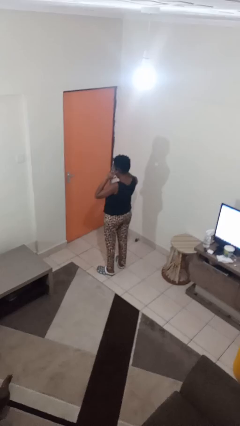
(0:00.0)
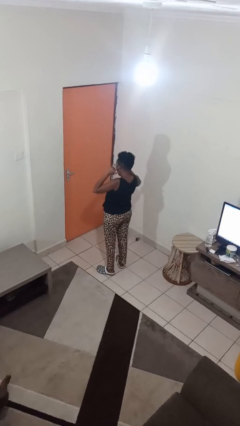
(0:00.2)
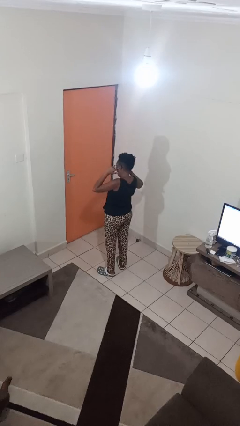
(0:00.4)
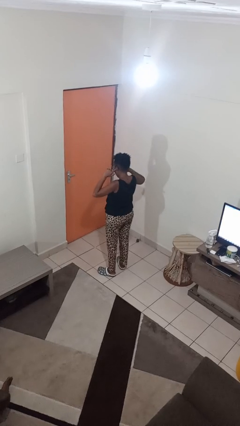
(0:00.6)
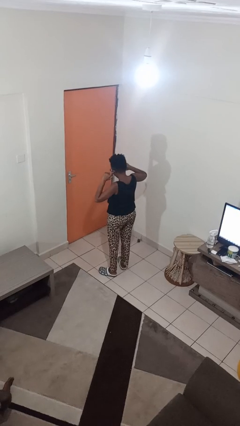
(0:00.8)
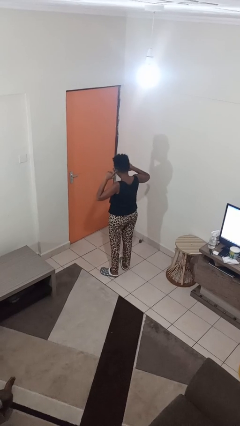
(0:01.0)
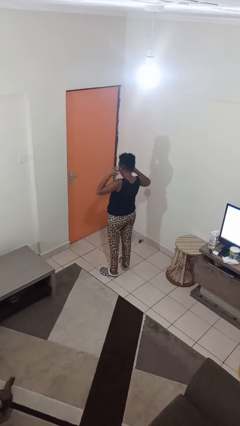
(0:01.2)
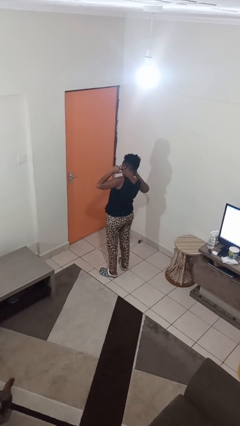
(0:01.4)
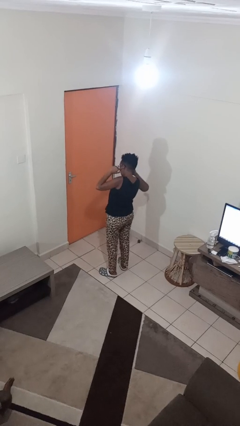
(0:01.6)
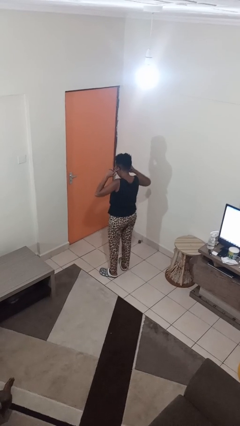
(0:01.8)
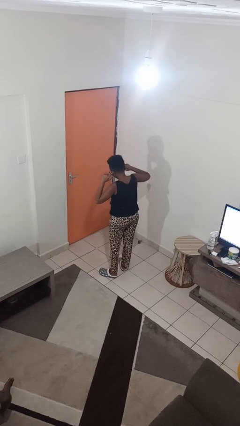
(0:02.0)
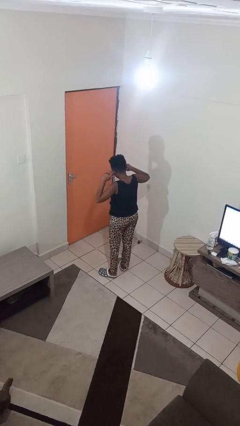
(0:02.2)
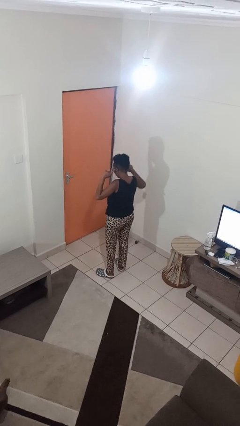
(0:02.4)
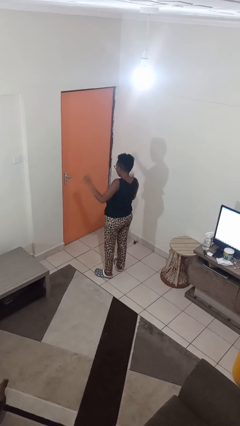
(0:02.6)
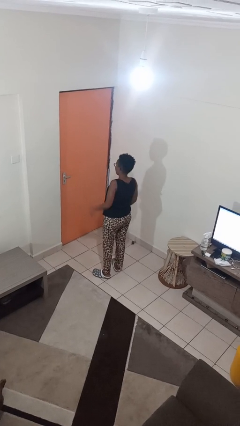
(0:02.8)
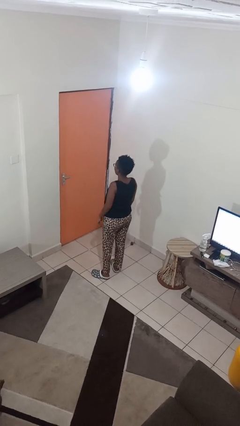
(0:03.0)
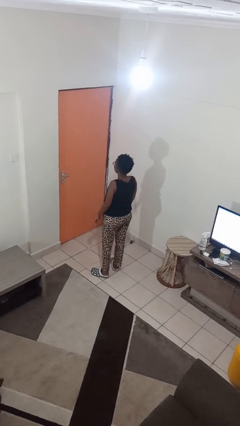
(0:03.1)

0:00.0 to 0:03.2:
person puts fingers in ear

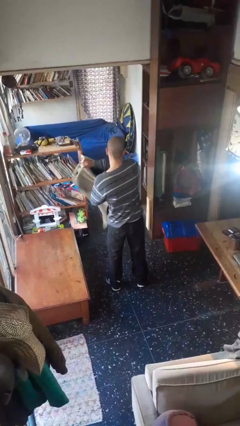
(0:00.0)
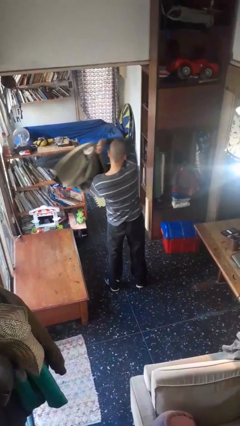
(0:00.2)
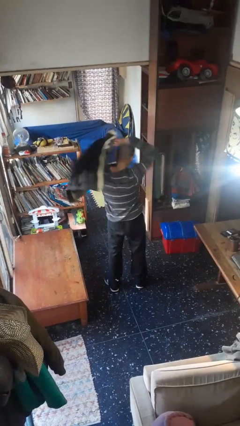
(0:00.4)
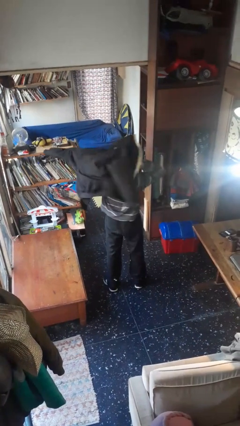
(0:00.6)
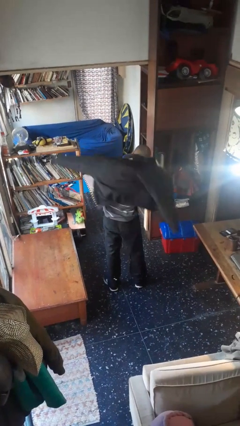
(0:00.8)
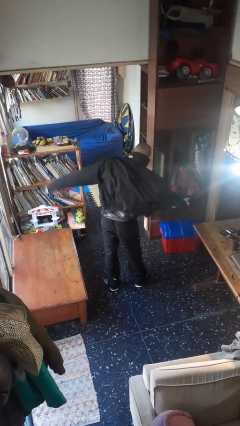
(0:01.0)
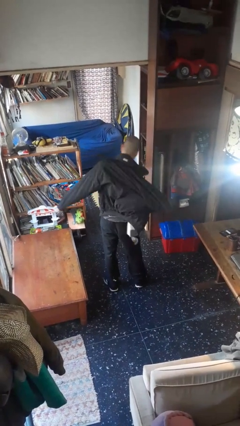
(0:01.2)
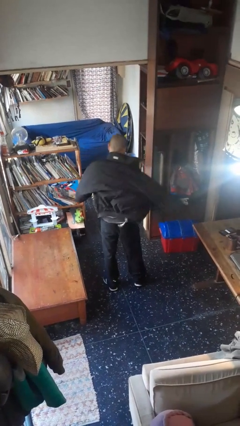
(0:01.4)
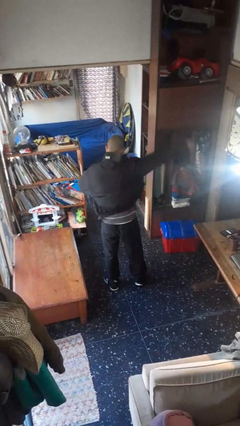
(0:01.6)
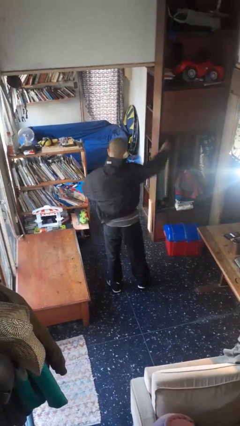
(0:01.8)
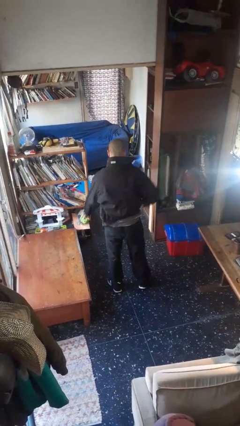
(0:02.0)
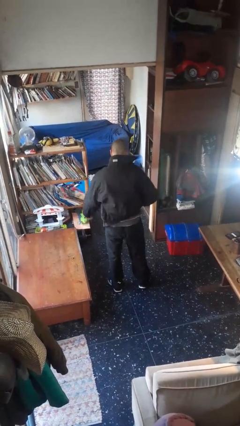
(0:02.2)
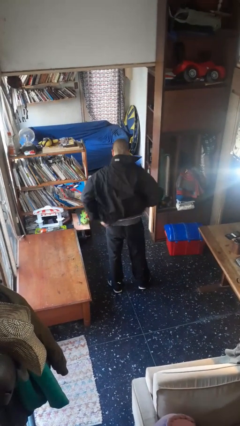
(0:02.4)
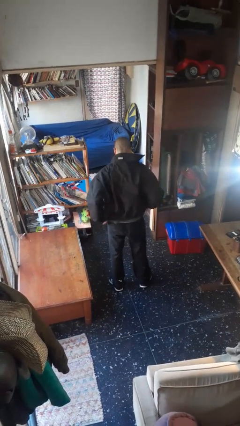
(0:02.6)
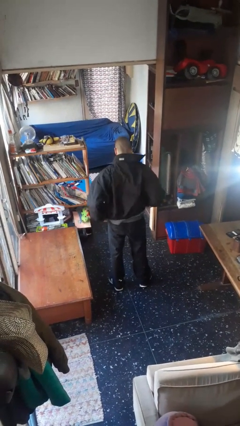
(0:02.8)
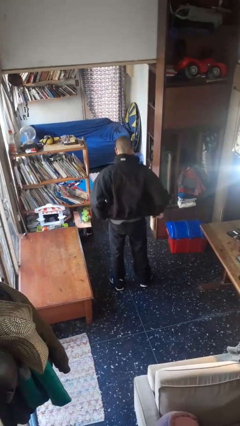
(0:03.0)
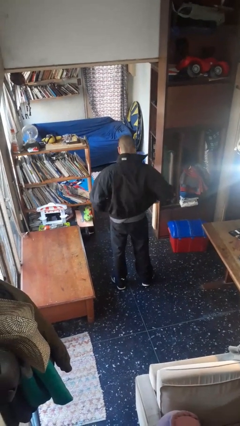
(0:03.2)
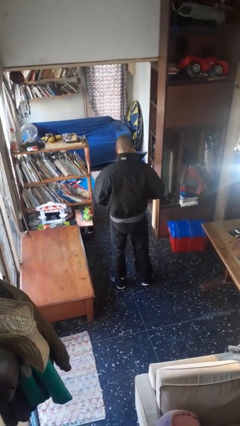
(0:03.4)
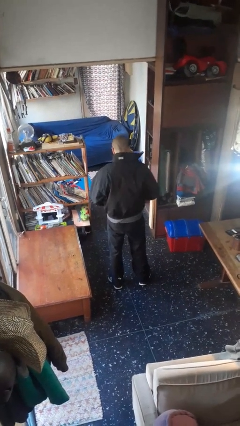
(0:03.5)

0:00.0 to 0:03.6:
person puts on jacket

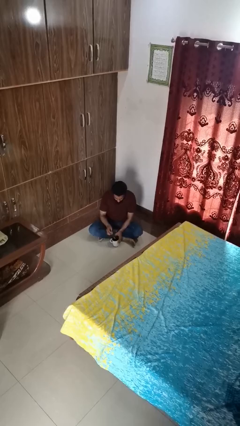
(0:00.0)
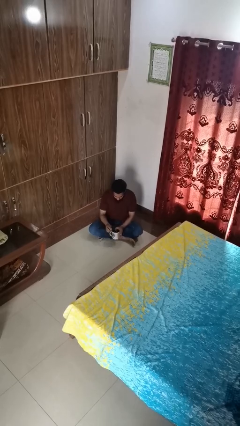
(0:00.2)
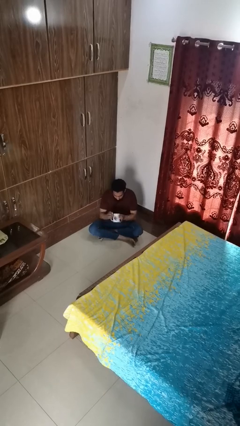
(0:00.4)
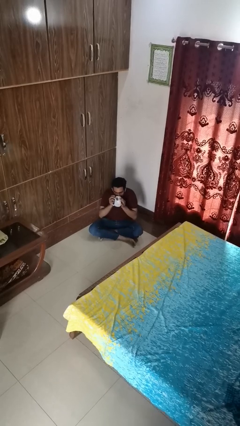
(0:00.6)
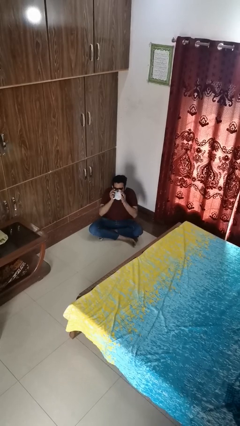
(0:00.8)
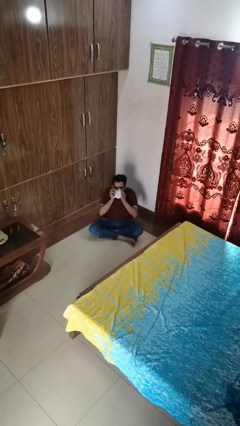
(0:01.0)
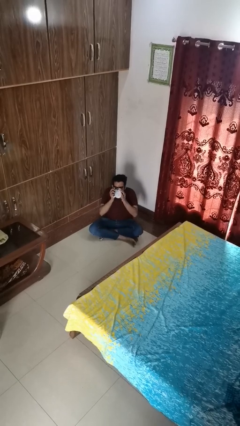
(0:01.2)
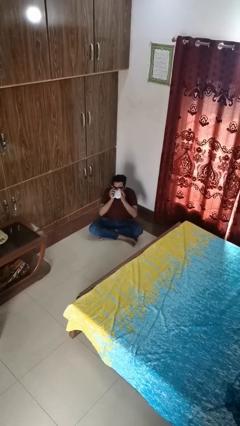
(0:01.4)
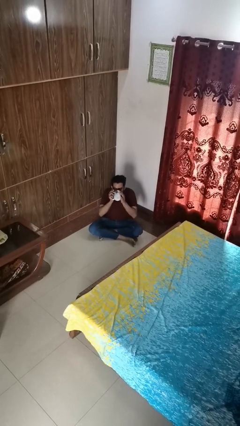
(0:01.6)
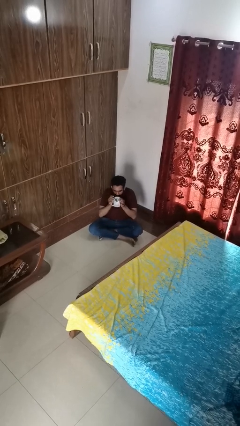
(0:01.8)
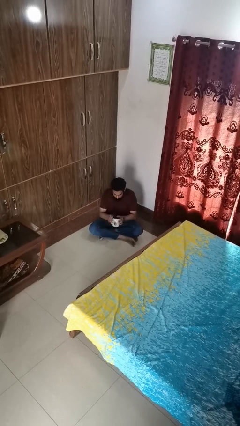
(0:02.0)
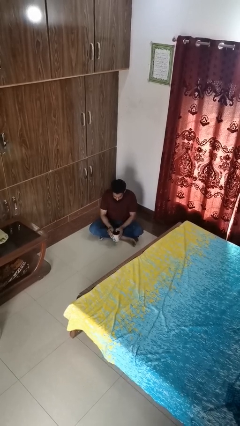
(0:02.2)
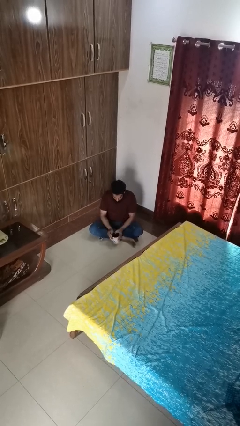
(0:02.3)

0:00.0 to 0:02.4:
person drinks from mug

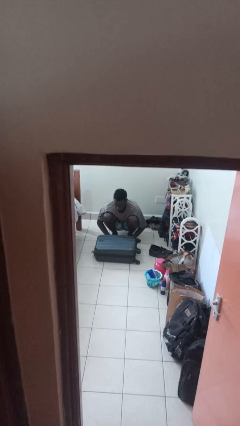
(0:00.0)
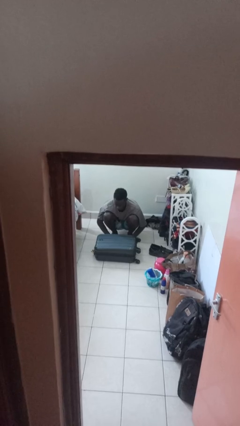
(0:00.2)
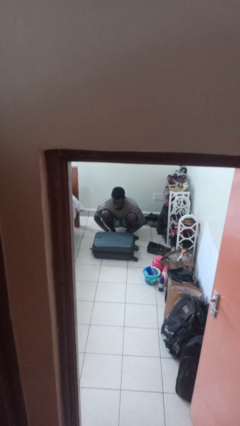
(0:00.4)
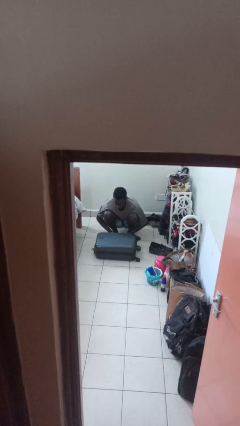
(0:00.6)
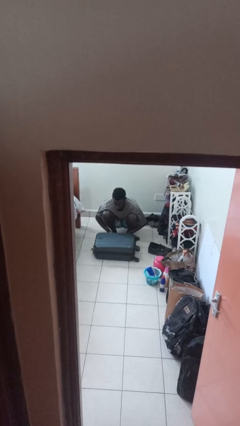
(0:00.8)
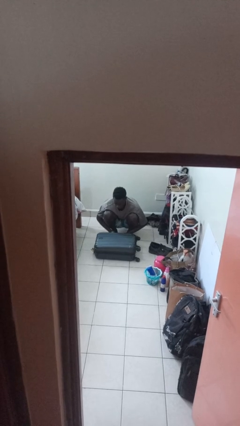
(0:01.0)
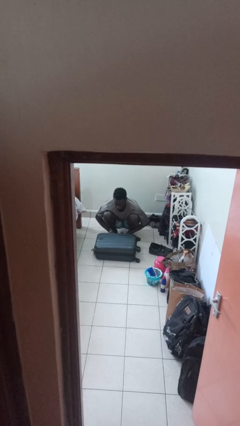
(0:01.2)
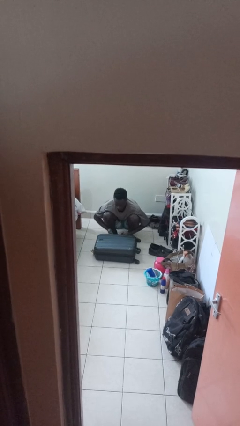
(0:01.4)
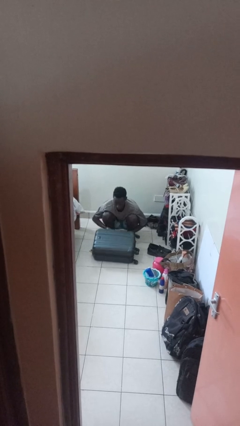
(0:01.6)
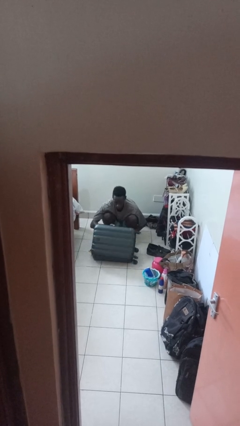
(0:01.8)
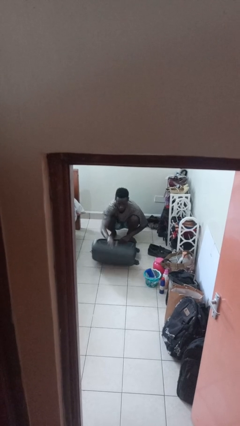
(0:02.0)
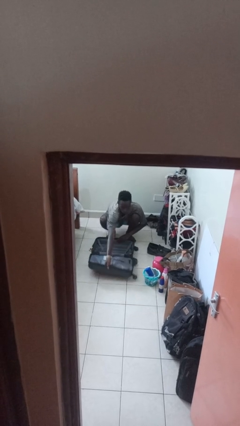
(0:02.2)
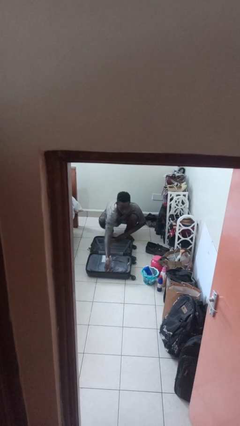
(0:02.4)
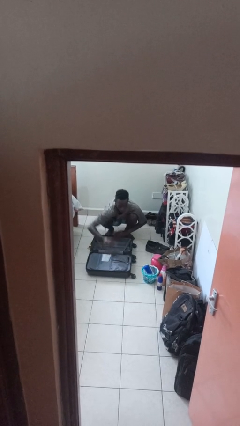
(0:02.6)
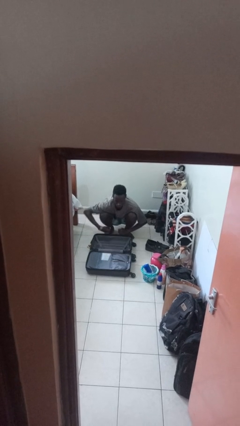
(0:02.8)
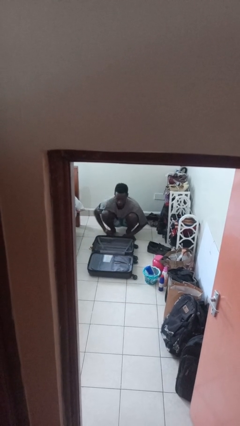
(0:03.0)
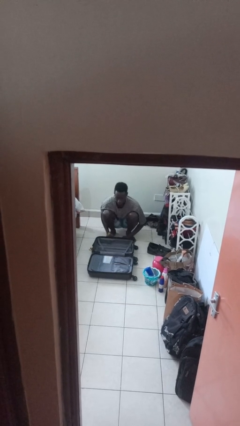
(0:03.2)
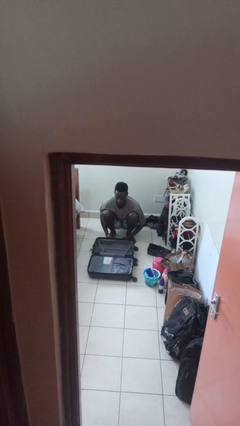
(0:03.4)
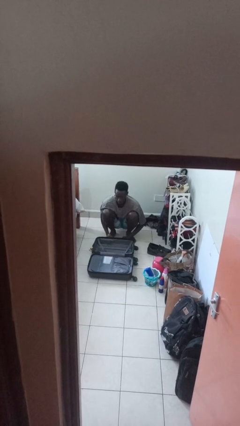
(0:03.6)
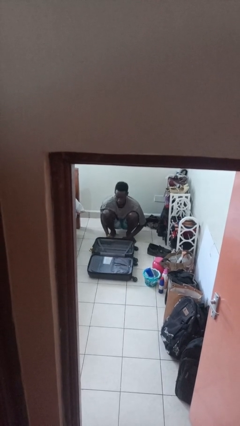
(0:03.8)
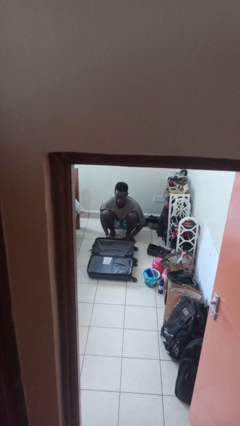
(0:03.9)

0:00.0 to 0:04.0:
person opens suitcase

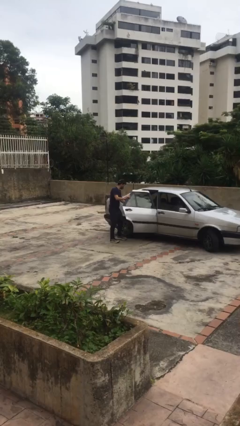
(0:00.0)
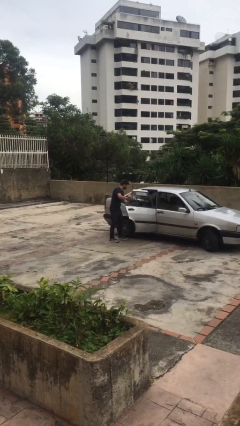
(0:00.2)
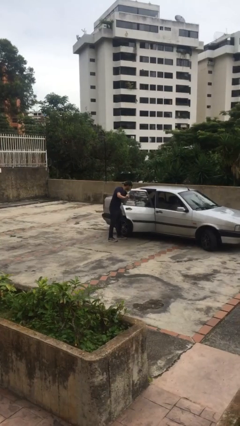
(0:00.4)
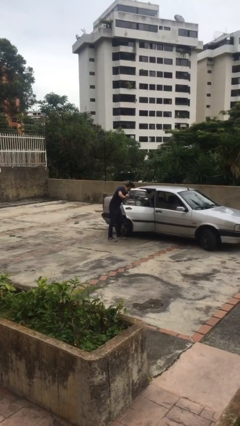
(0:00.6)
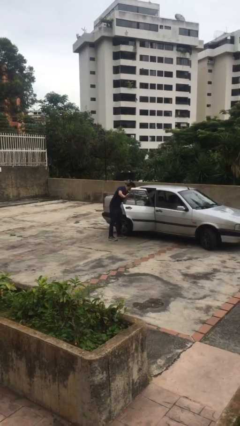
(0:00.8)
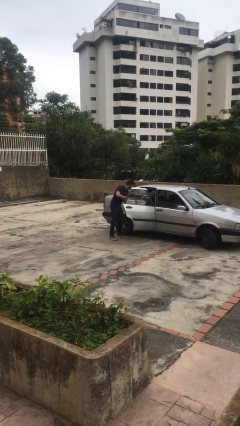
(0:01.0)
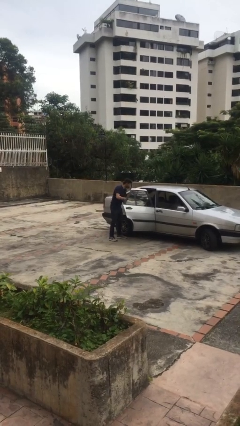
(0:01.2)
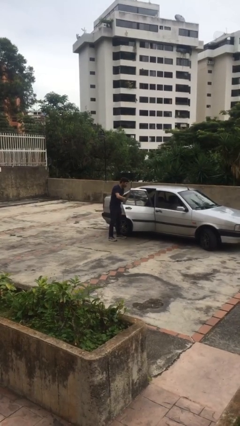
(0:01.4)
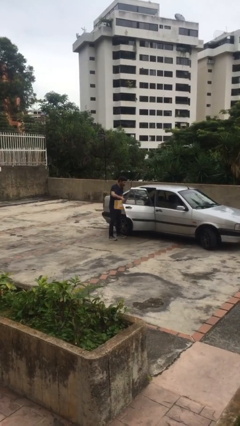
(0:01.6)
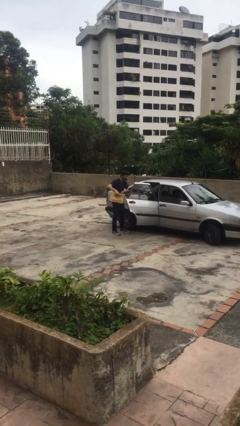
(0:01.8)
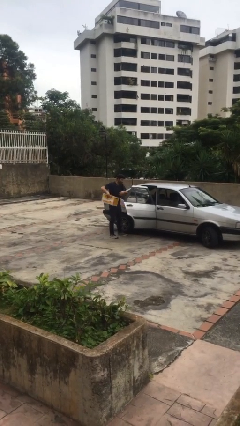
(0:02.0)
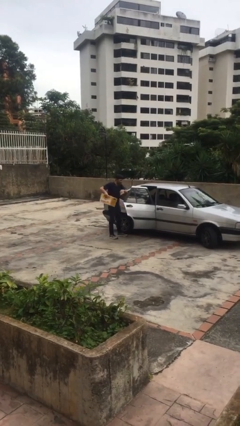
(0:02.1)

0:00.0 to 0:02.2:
person unloads car

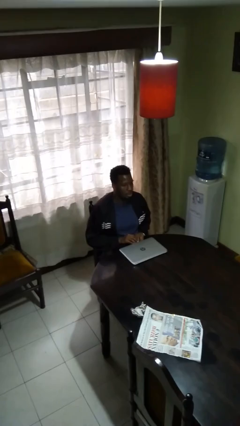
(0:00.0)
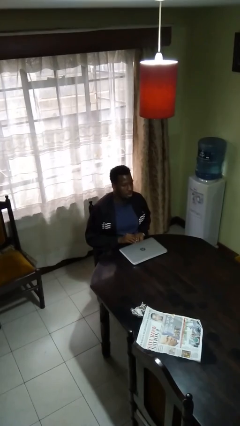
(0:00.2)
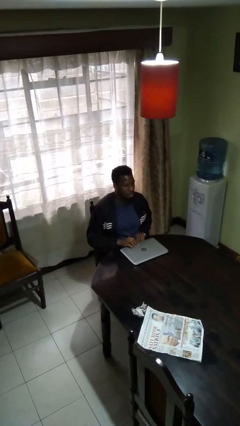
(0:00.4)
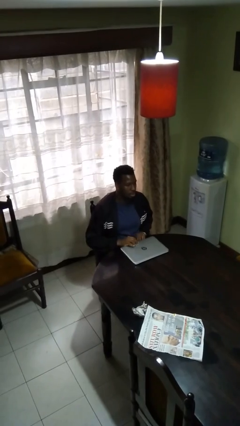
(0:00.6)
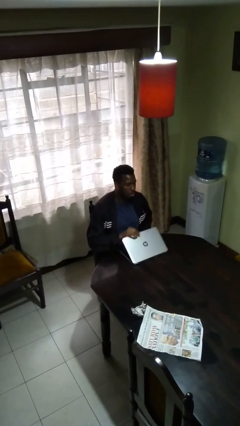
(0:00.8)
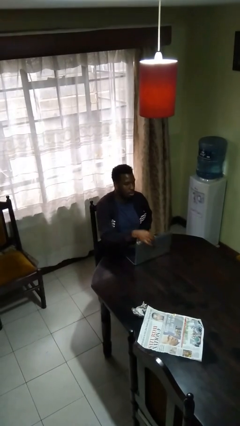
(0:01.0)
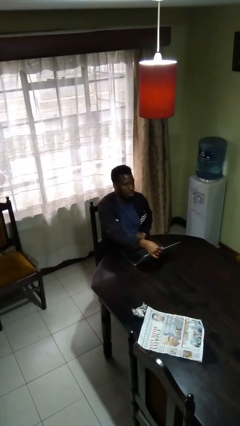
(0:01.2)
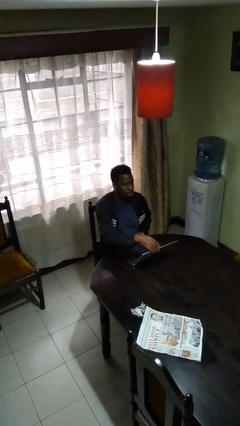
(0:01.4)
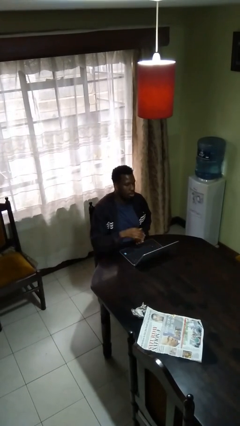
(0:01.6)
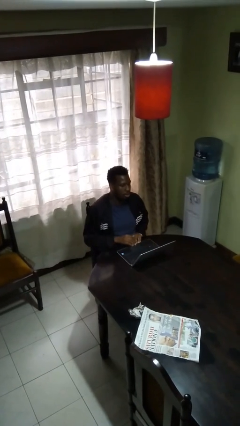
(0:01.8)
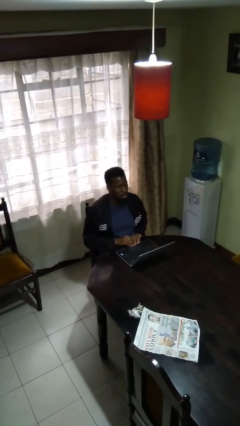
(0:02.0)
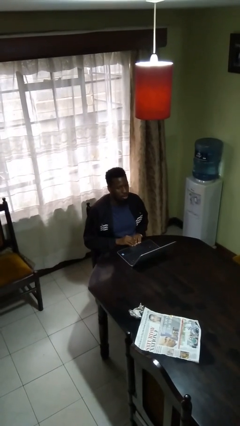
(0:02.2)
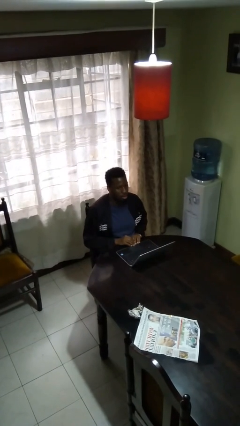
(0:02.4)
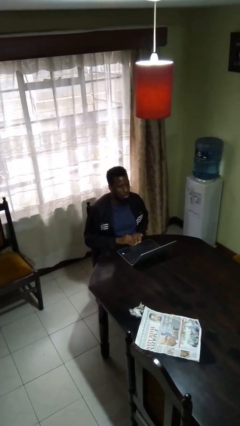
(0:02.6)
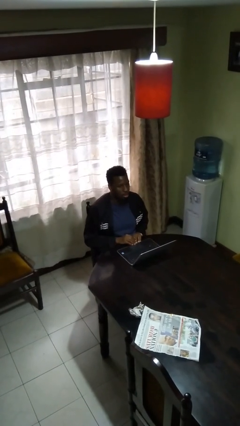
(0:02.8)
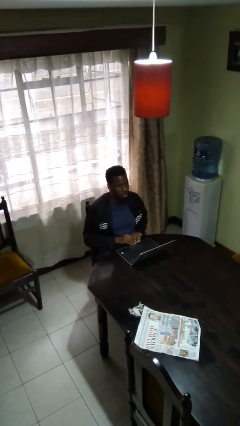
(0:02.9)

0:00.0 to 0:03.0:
person opens laptop
